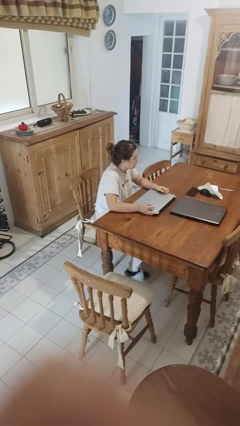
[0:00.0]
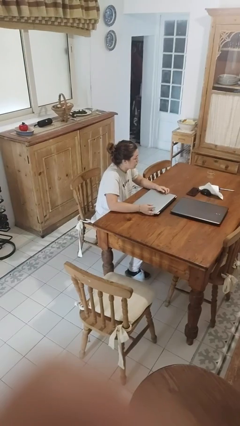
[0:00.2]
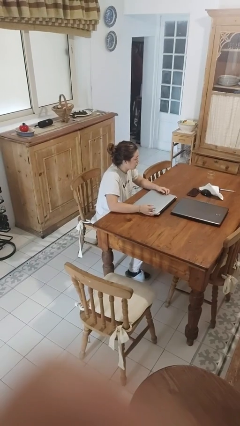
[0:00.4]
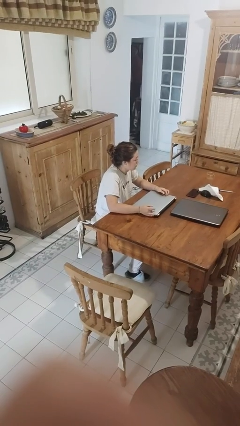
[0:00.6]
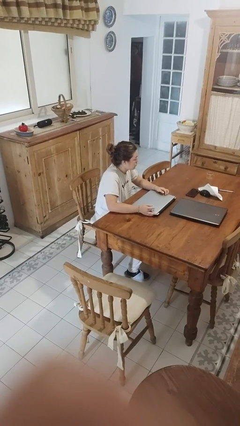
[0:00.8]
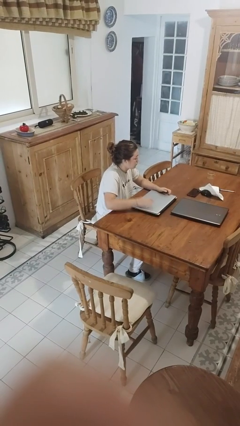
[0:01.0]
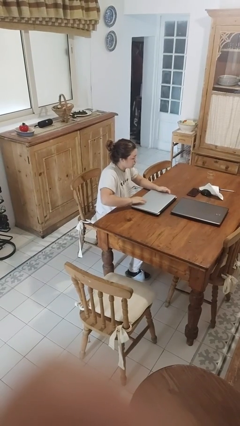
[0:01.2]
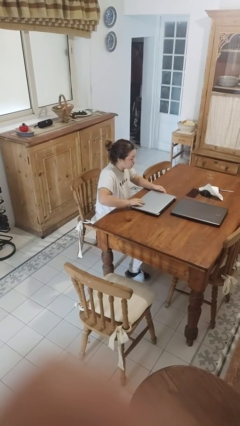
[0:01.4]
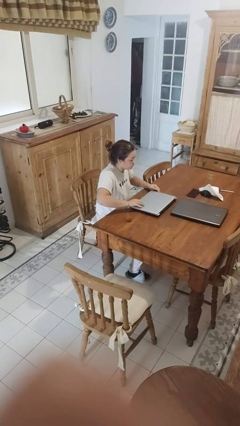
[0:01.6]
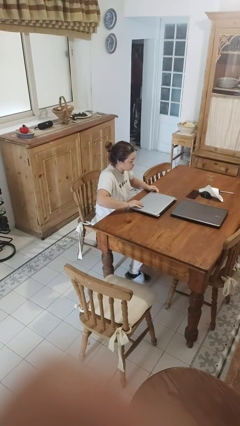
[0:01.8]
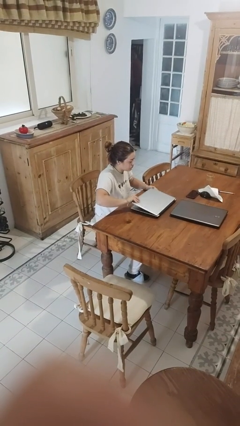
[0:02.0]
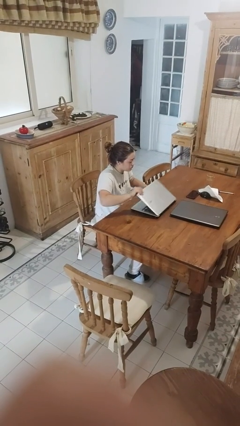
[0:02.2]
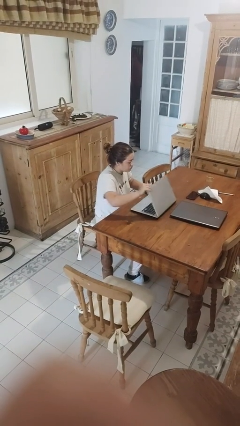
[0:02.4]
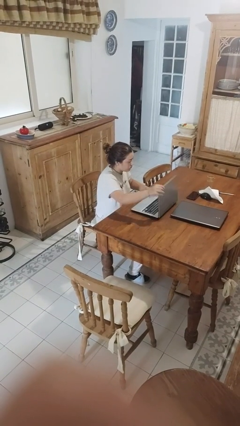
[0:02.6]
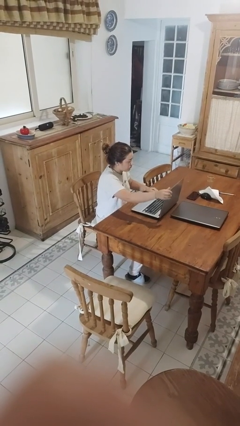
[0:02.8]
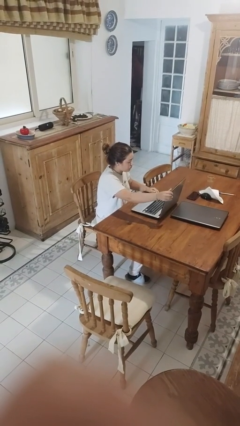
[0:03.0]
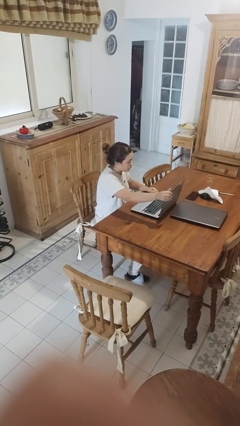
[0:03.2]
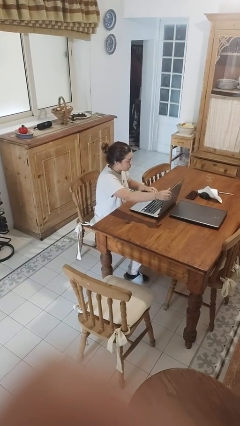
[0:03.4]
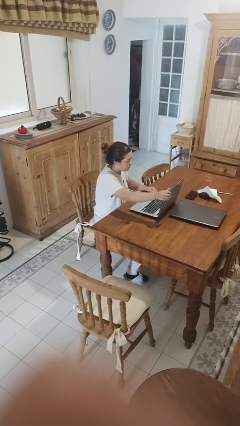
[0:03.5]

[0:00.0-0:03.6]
person opens laptop

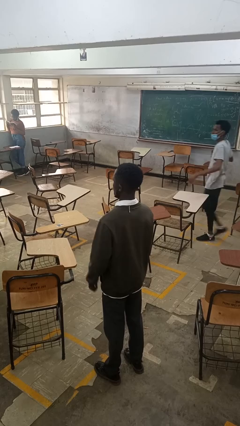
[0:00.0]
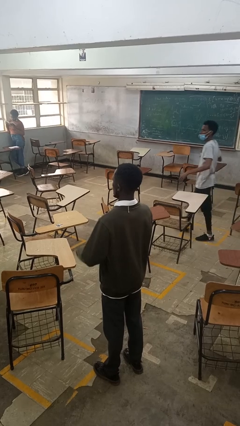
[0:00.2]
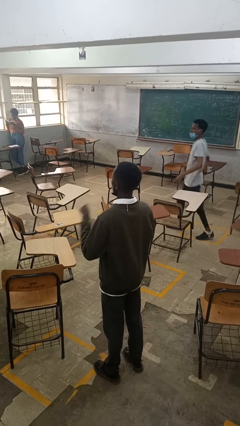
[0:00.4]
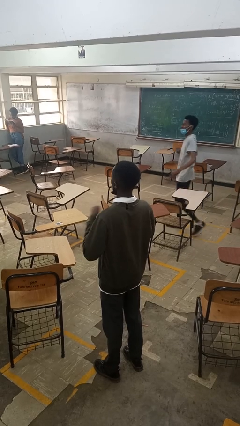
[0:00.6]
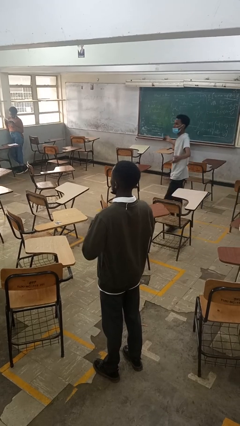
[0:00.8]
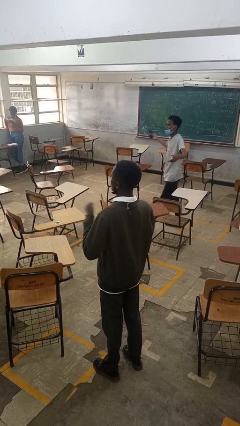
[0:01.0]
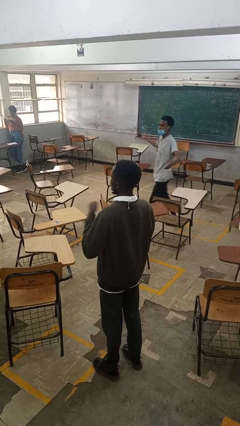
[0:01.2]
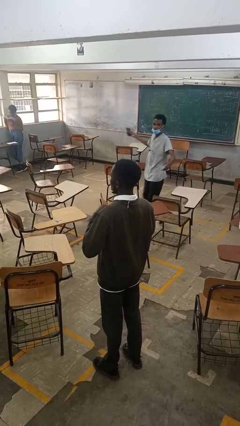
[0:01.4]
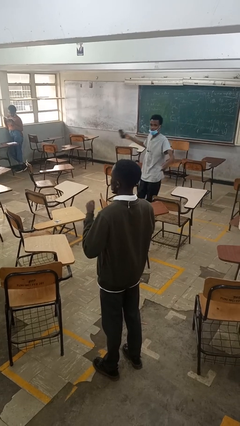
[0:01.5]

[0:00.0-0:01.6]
person drums on chest

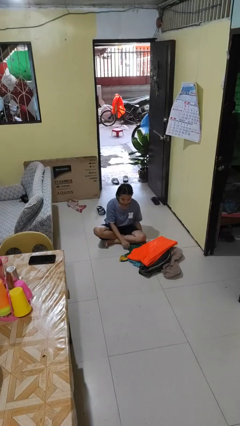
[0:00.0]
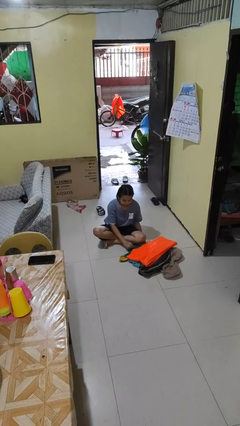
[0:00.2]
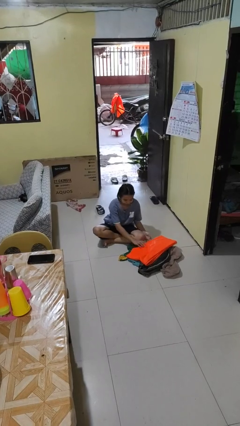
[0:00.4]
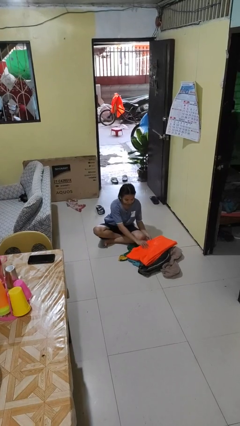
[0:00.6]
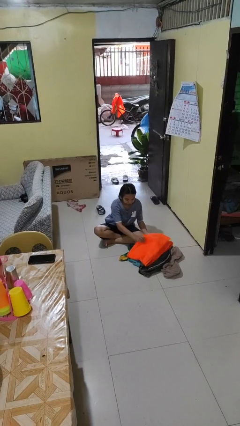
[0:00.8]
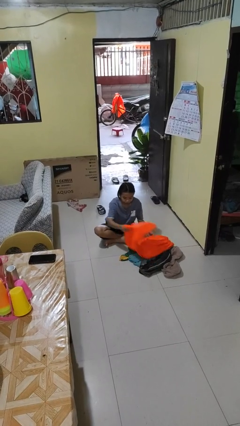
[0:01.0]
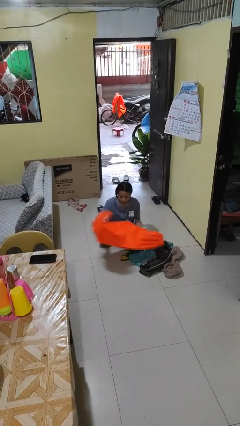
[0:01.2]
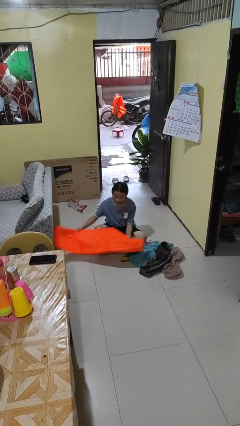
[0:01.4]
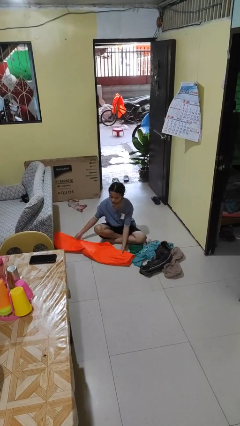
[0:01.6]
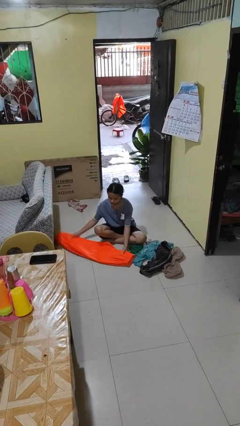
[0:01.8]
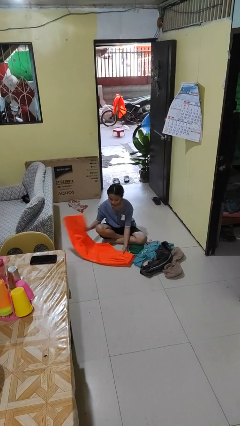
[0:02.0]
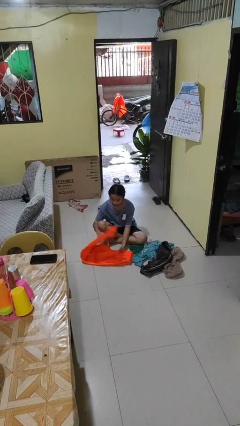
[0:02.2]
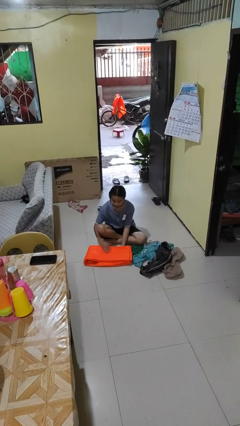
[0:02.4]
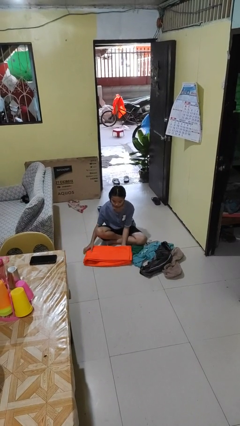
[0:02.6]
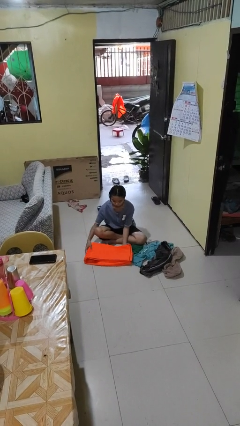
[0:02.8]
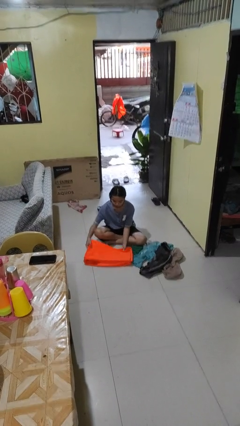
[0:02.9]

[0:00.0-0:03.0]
person folds pants

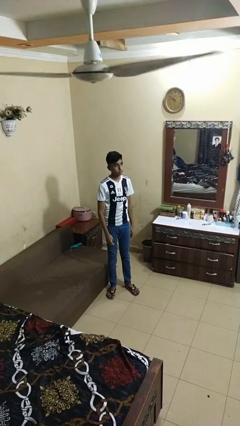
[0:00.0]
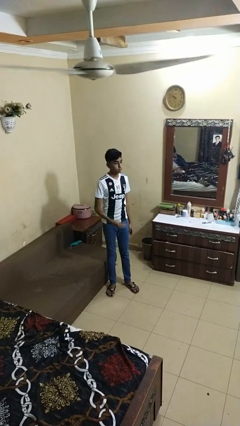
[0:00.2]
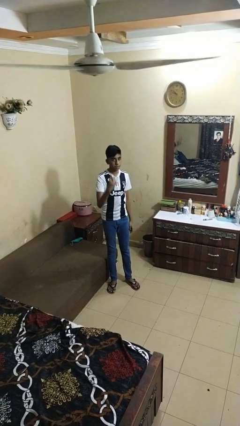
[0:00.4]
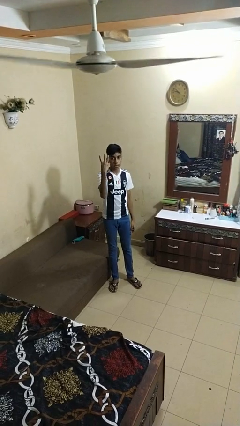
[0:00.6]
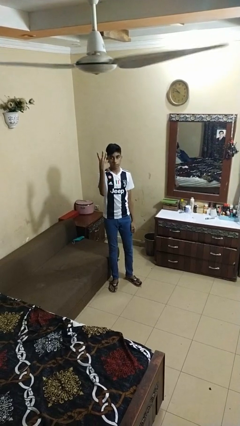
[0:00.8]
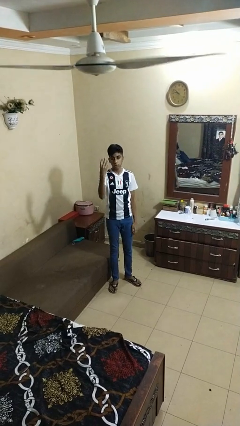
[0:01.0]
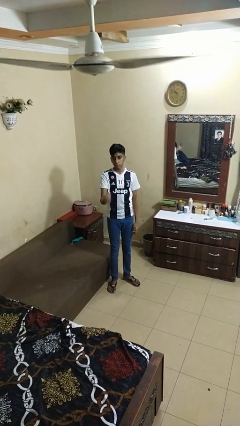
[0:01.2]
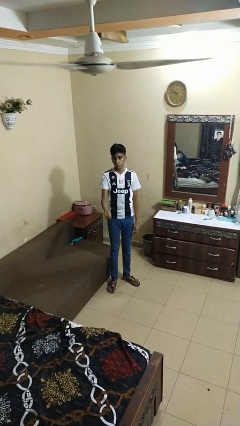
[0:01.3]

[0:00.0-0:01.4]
person gestures number three

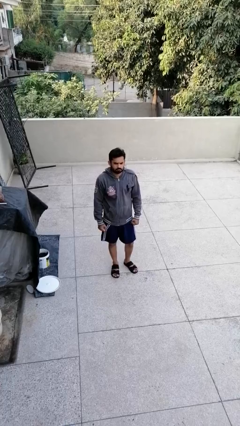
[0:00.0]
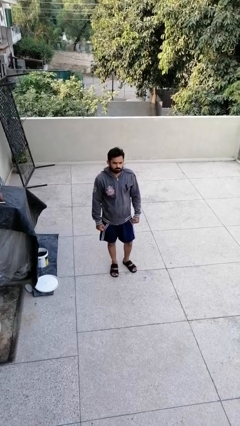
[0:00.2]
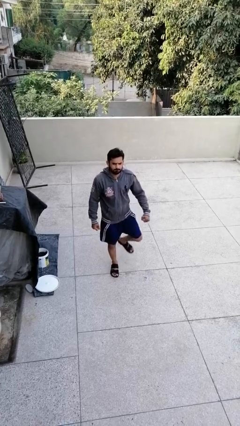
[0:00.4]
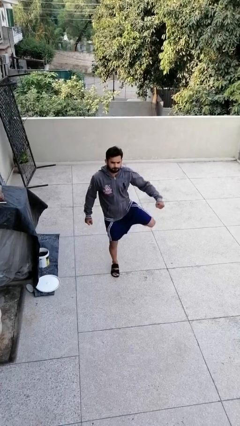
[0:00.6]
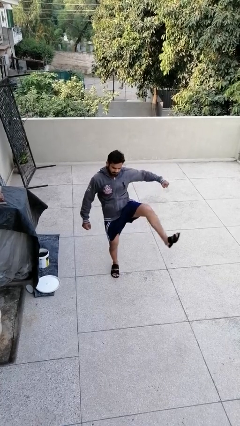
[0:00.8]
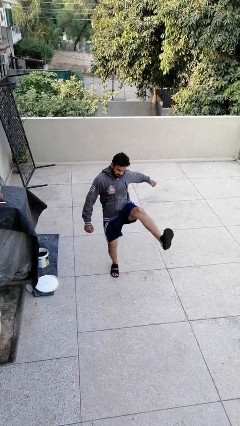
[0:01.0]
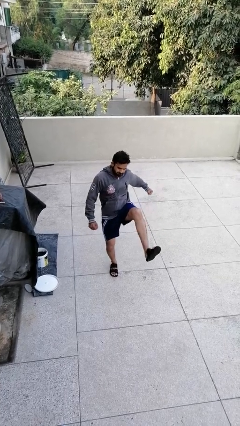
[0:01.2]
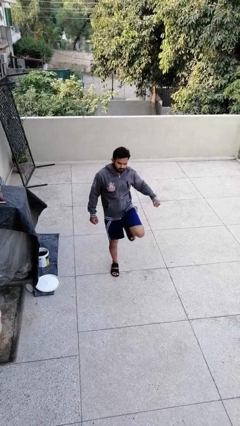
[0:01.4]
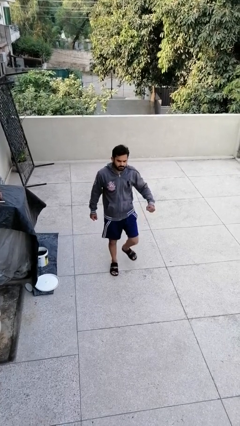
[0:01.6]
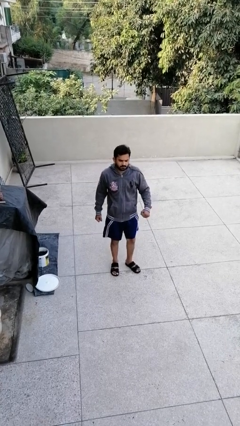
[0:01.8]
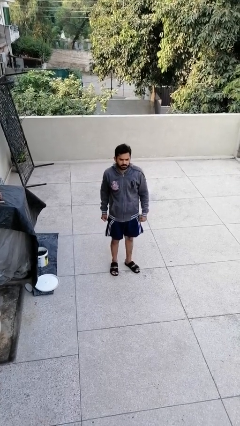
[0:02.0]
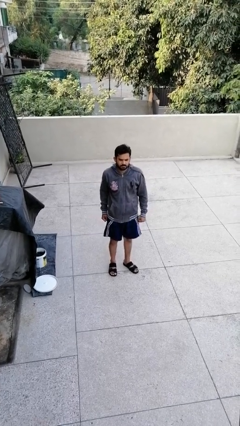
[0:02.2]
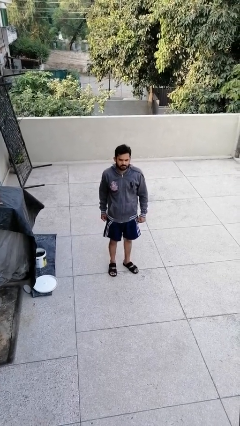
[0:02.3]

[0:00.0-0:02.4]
person karate kicks

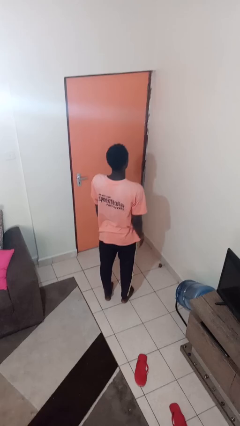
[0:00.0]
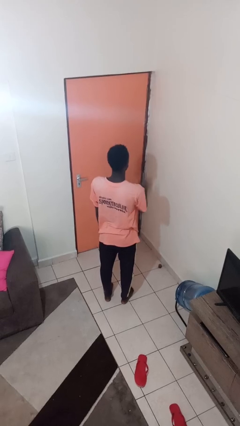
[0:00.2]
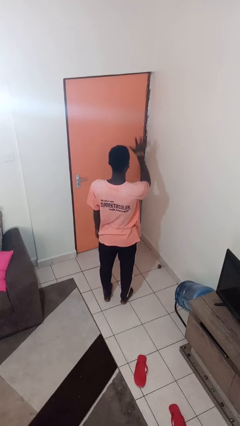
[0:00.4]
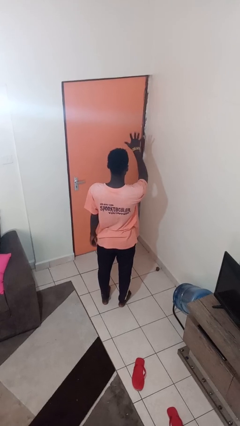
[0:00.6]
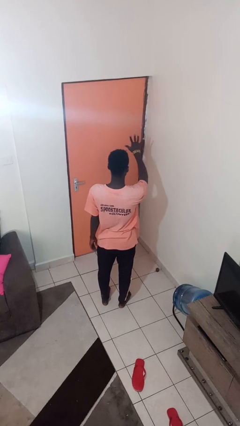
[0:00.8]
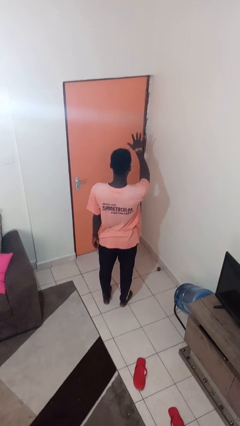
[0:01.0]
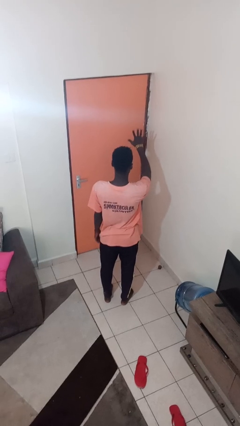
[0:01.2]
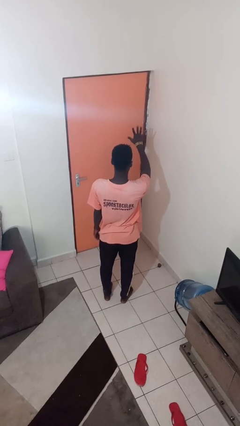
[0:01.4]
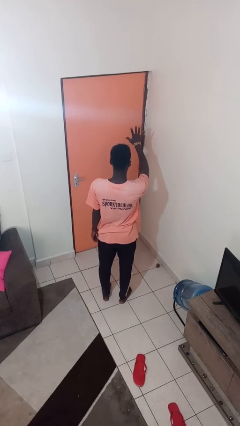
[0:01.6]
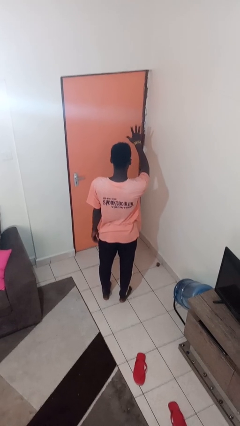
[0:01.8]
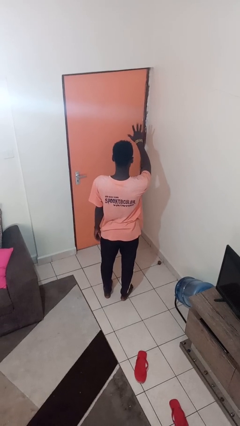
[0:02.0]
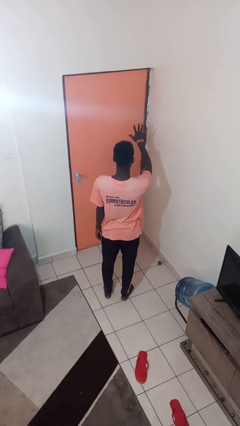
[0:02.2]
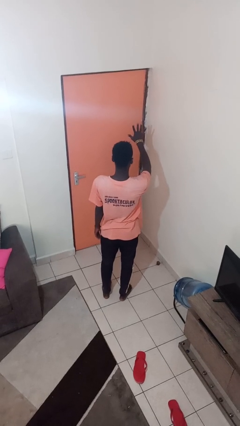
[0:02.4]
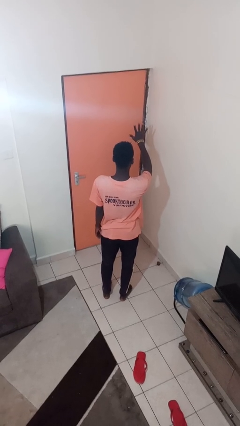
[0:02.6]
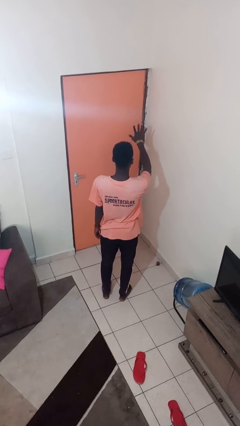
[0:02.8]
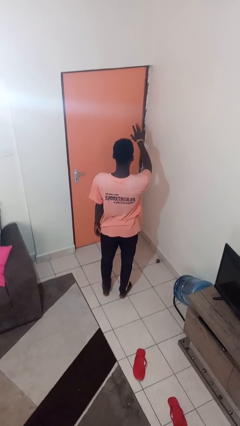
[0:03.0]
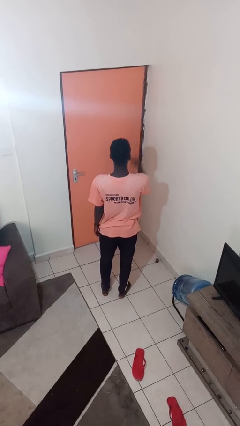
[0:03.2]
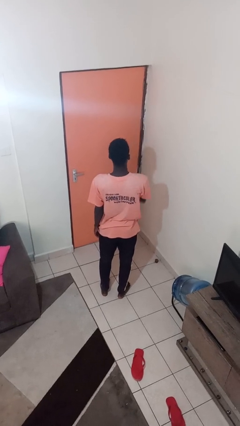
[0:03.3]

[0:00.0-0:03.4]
person gestures number five

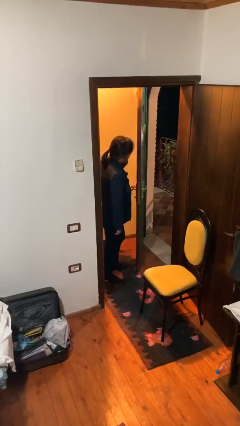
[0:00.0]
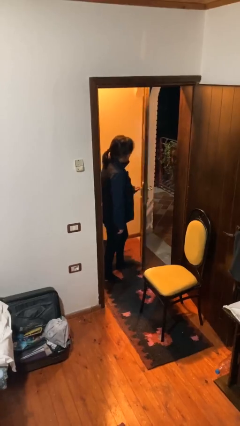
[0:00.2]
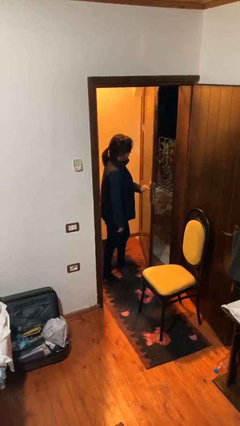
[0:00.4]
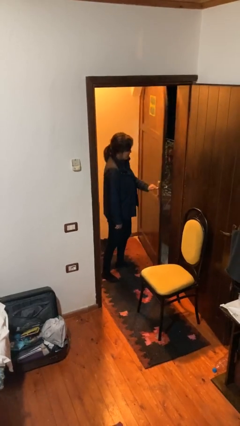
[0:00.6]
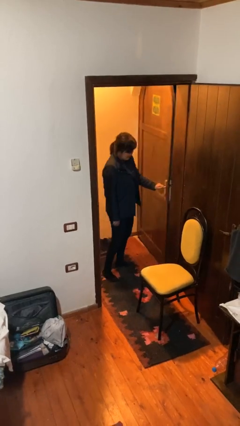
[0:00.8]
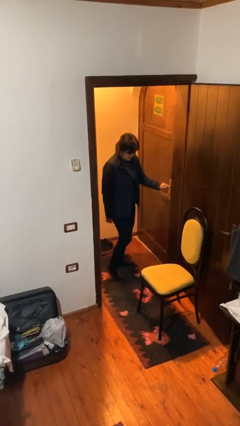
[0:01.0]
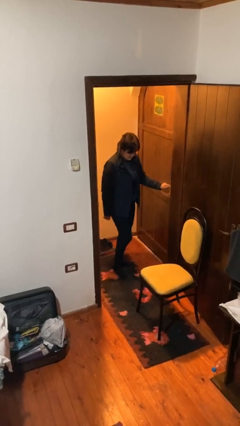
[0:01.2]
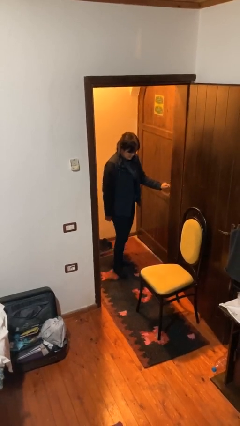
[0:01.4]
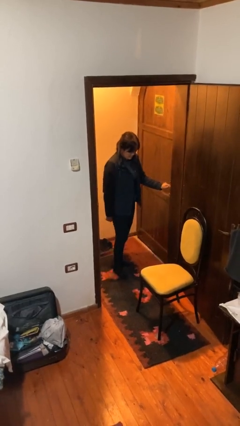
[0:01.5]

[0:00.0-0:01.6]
person closes facility door
